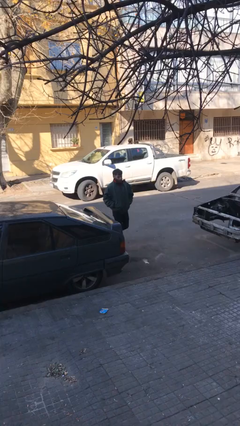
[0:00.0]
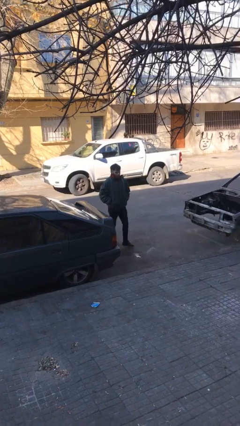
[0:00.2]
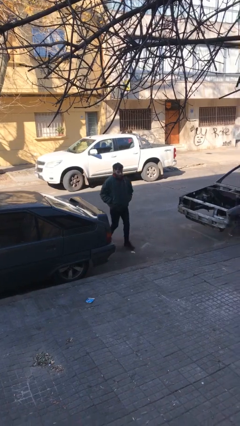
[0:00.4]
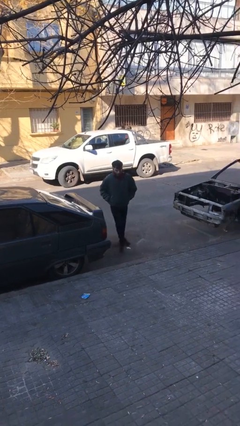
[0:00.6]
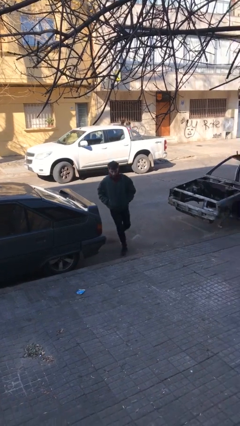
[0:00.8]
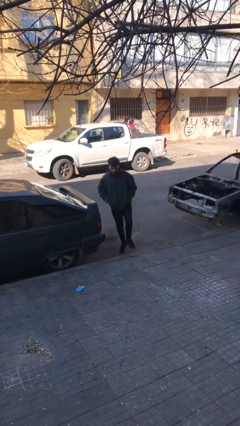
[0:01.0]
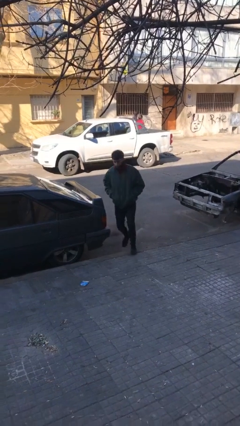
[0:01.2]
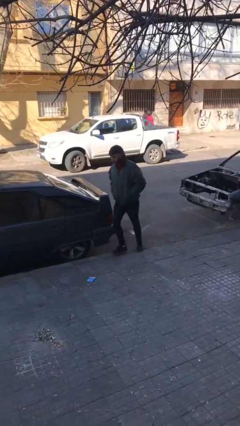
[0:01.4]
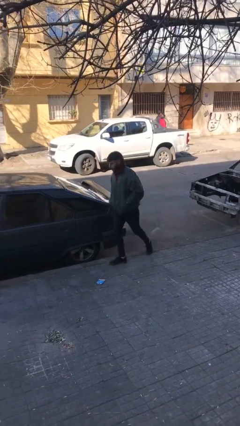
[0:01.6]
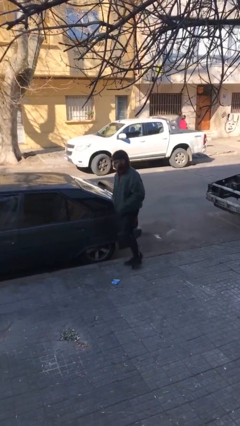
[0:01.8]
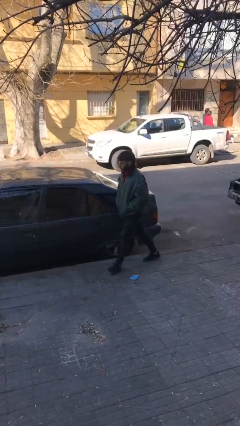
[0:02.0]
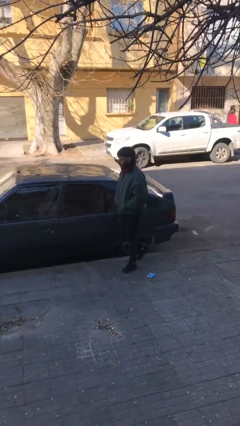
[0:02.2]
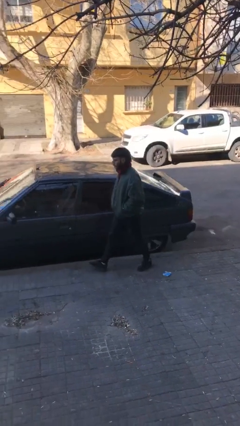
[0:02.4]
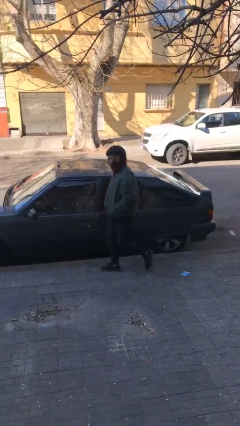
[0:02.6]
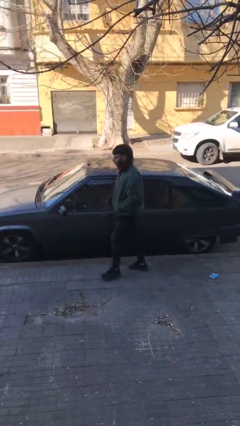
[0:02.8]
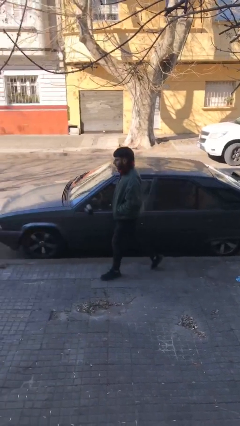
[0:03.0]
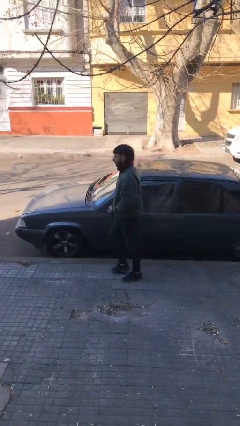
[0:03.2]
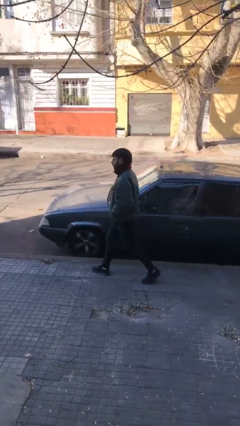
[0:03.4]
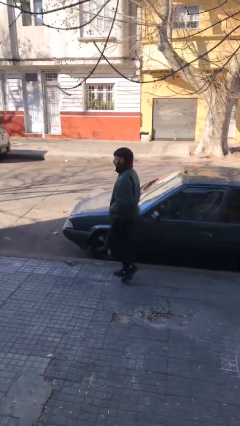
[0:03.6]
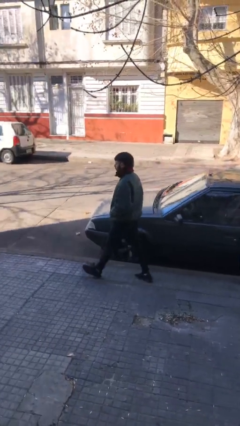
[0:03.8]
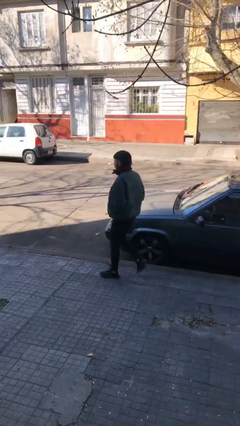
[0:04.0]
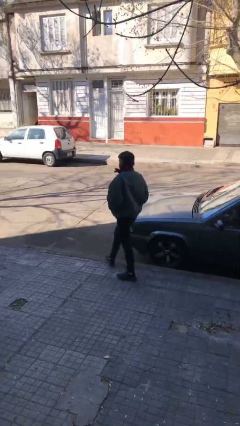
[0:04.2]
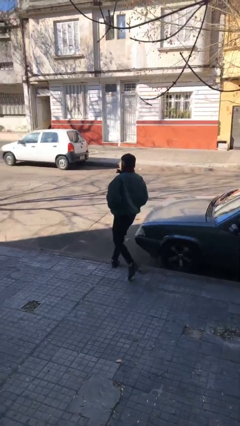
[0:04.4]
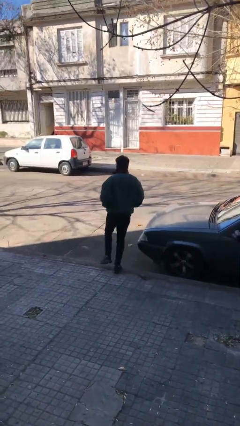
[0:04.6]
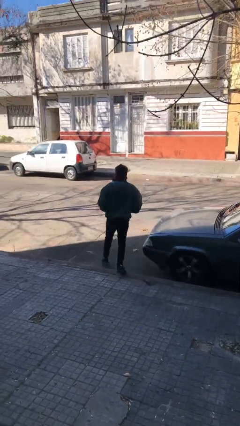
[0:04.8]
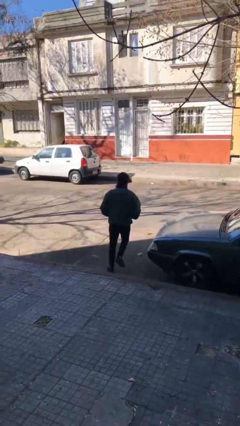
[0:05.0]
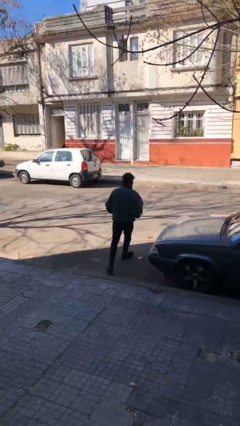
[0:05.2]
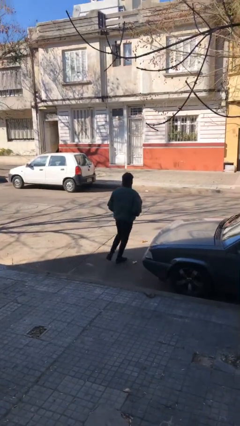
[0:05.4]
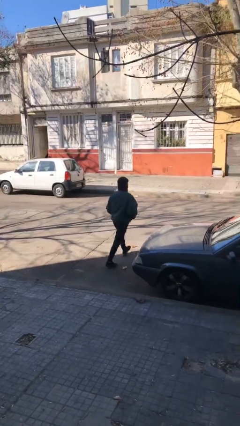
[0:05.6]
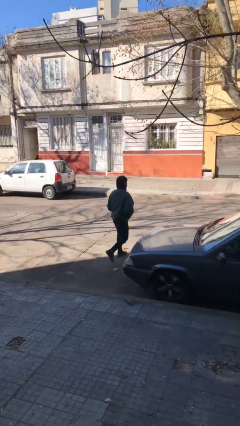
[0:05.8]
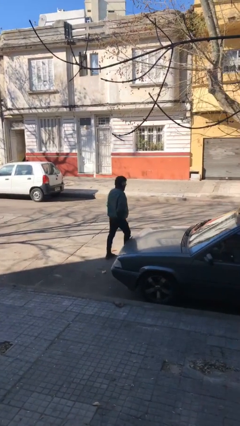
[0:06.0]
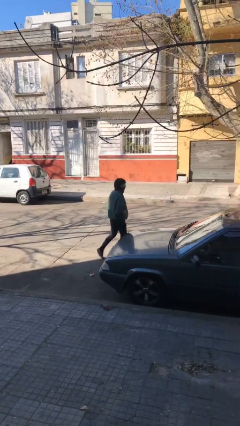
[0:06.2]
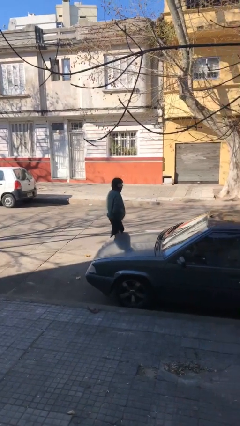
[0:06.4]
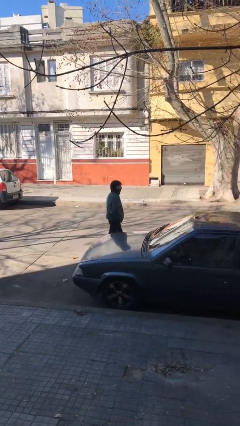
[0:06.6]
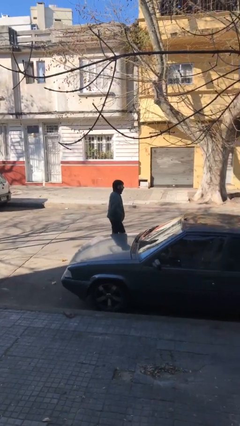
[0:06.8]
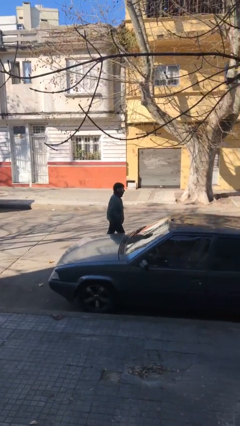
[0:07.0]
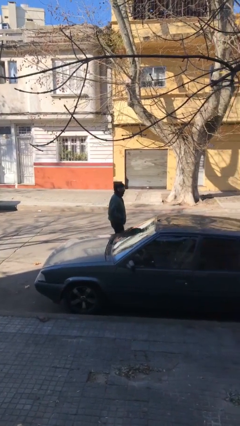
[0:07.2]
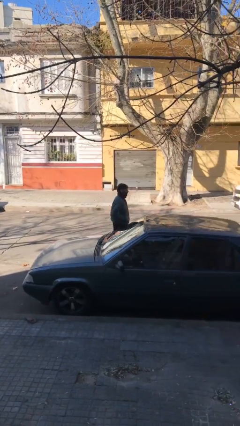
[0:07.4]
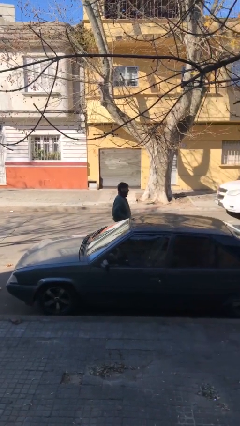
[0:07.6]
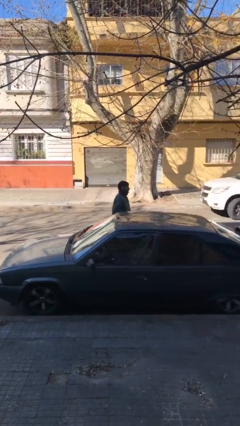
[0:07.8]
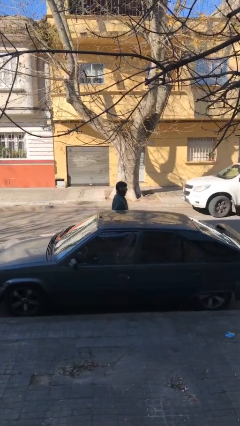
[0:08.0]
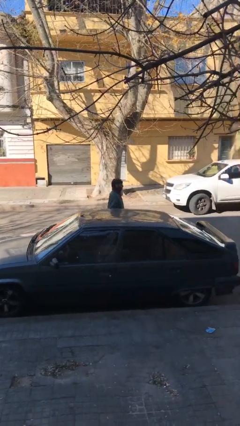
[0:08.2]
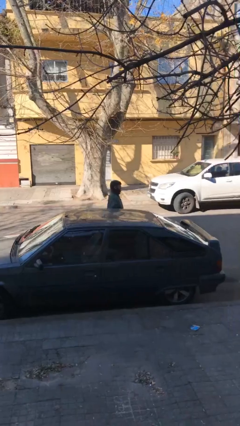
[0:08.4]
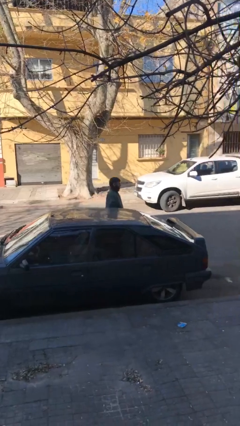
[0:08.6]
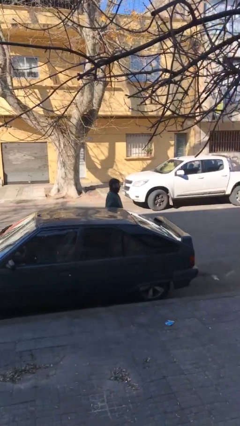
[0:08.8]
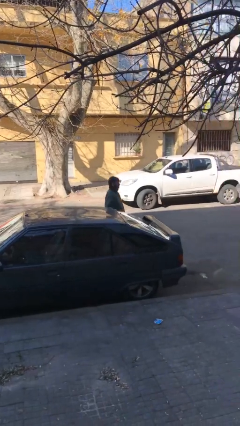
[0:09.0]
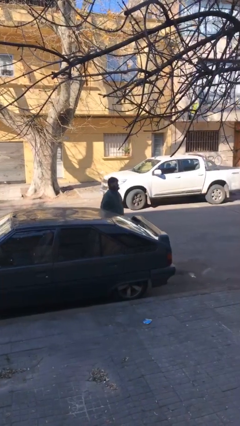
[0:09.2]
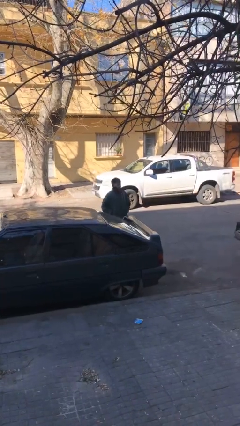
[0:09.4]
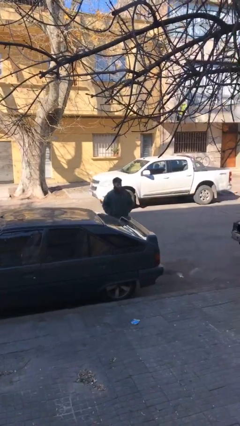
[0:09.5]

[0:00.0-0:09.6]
person walks around car

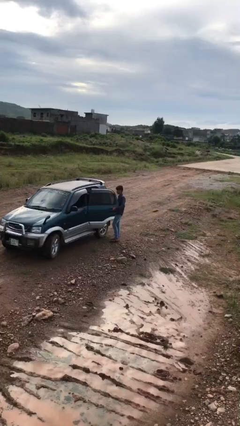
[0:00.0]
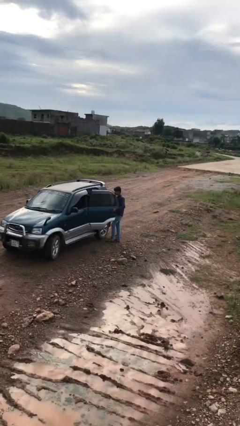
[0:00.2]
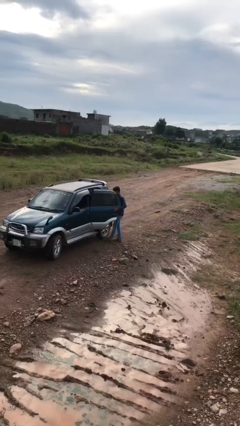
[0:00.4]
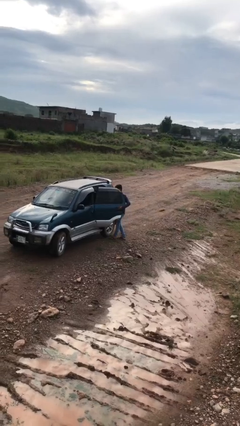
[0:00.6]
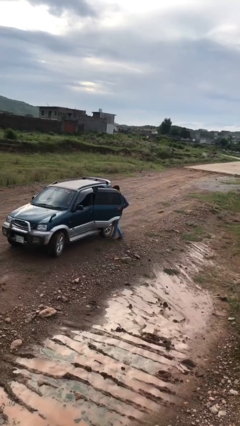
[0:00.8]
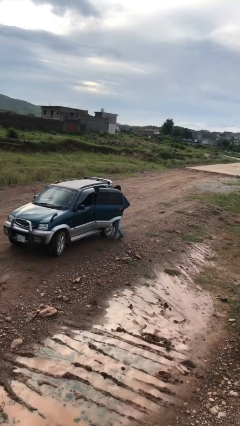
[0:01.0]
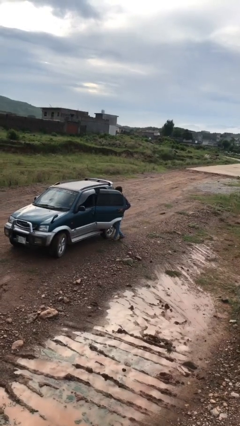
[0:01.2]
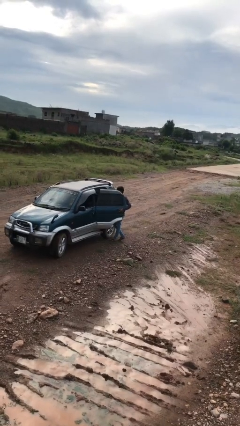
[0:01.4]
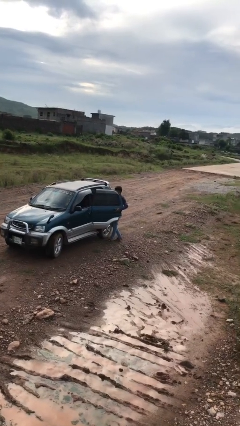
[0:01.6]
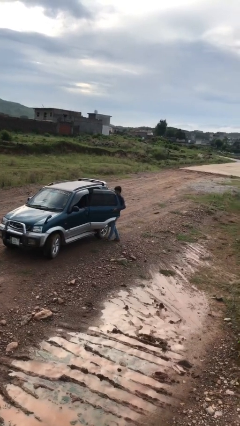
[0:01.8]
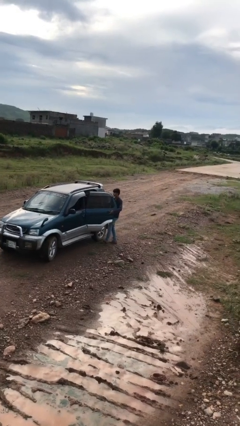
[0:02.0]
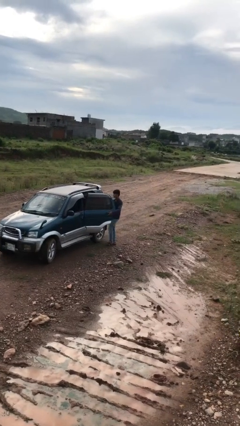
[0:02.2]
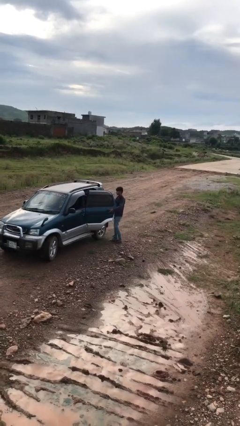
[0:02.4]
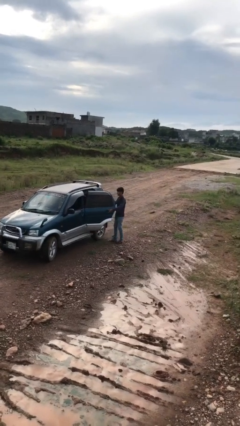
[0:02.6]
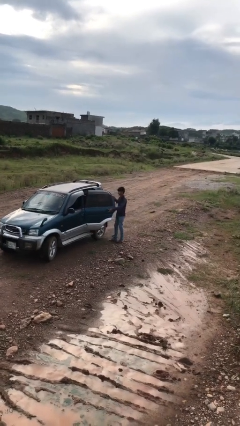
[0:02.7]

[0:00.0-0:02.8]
person unloads car

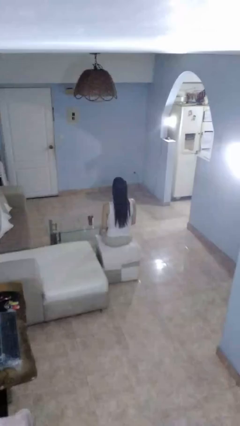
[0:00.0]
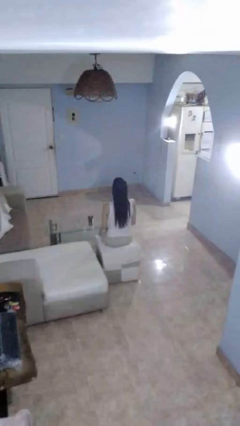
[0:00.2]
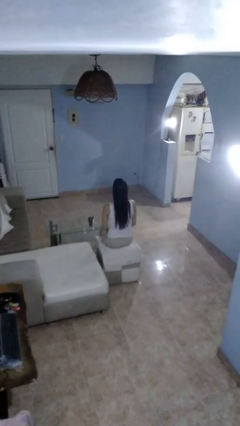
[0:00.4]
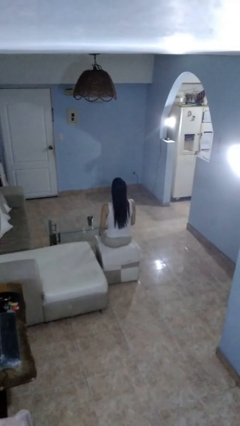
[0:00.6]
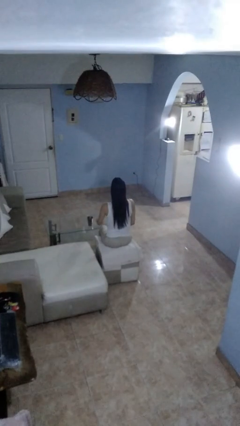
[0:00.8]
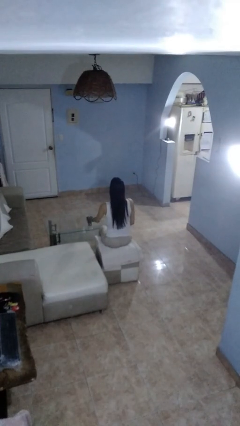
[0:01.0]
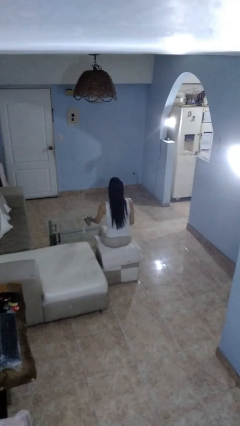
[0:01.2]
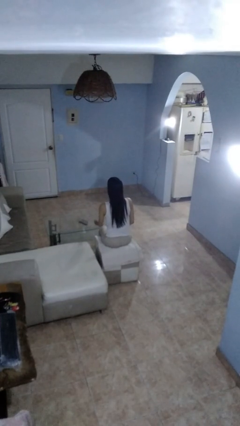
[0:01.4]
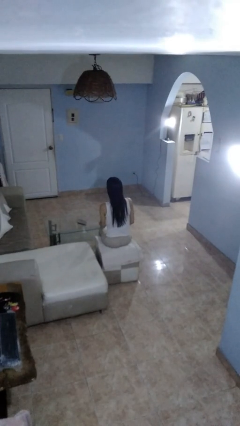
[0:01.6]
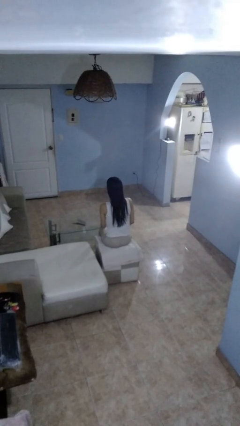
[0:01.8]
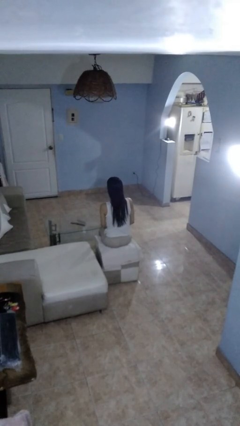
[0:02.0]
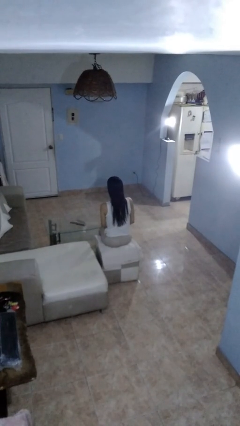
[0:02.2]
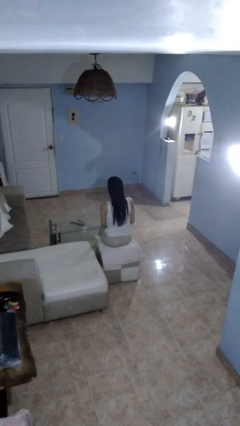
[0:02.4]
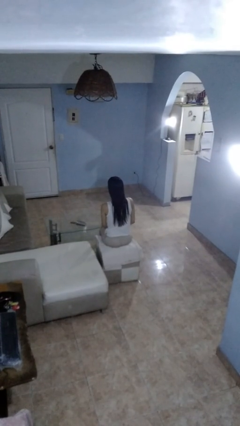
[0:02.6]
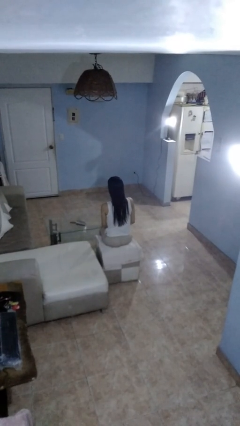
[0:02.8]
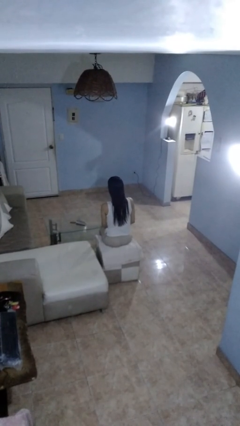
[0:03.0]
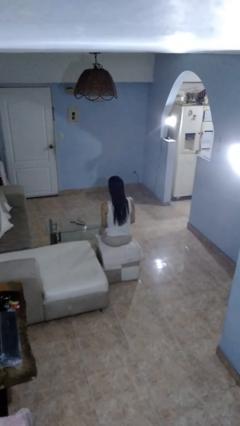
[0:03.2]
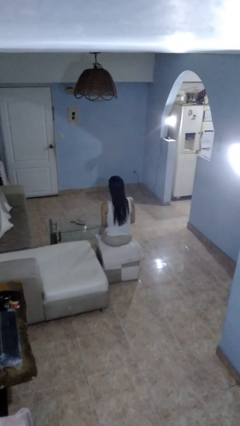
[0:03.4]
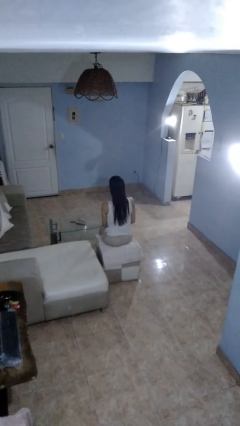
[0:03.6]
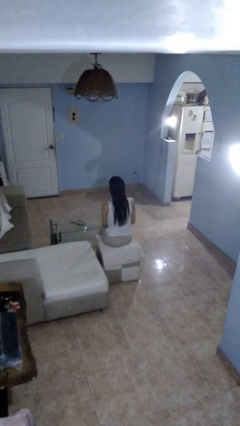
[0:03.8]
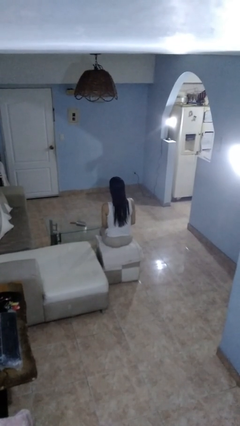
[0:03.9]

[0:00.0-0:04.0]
person spills on table

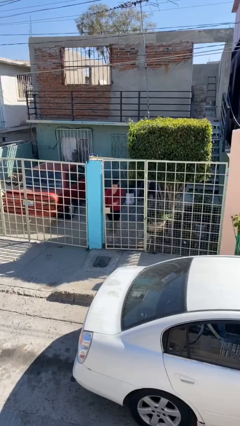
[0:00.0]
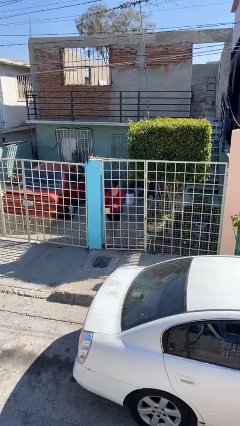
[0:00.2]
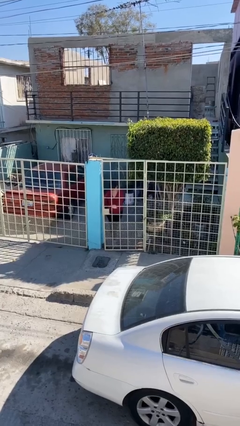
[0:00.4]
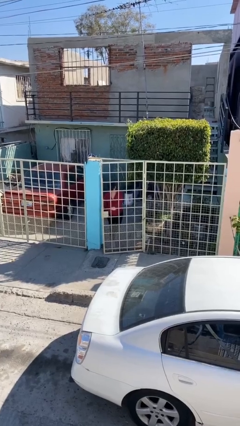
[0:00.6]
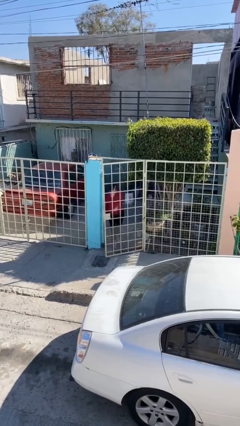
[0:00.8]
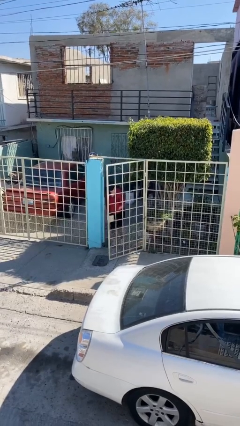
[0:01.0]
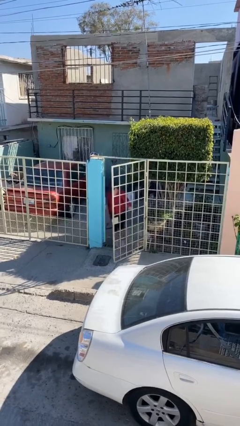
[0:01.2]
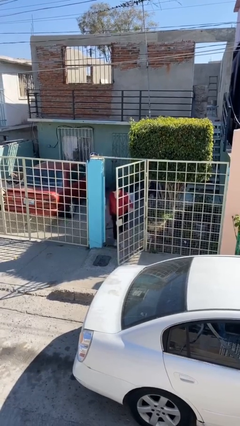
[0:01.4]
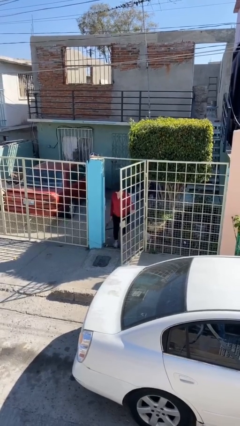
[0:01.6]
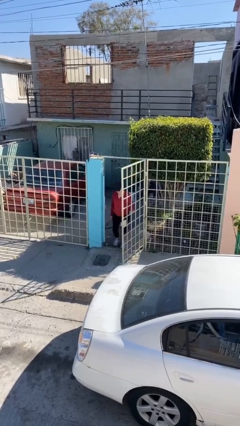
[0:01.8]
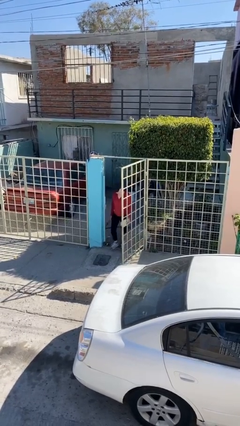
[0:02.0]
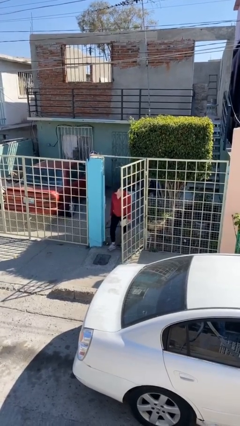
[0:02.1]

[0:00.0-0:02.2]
person opens facility door
